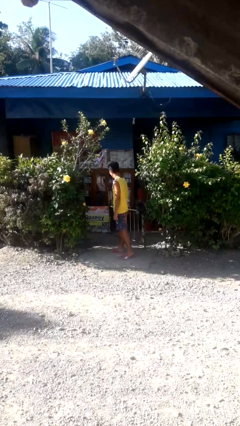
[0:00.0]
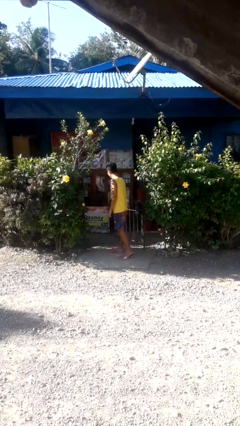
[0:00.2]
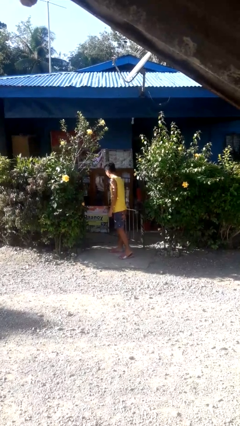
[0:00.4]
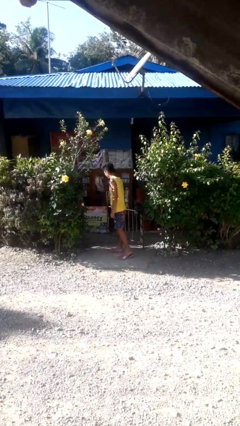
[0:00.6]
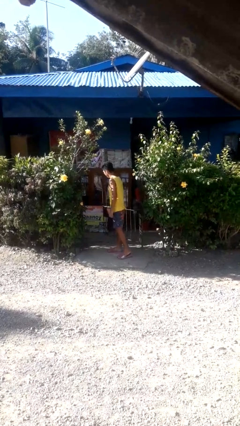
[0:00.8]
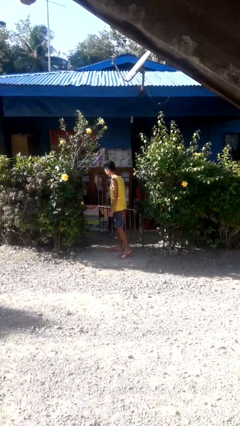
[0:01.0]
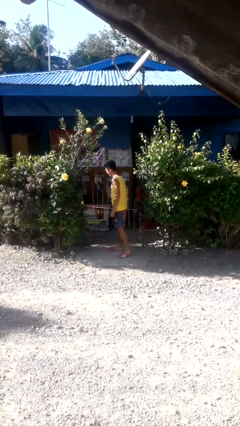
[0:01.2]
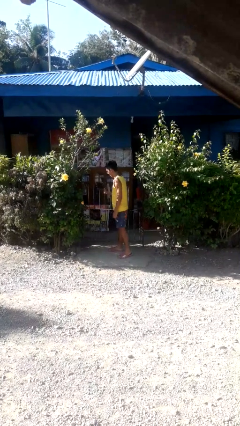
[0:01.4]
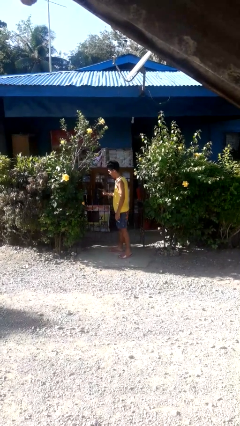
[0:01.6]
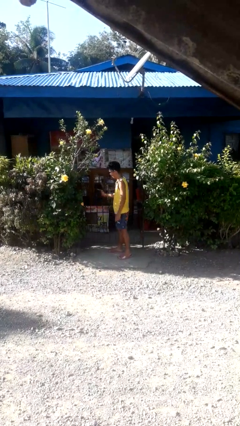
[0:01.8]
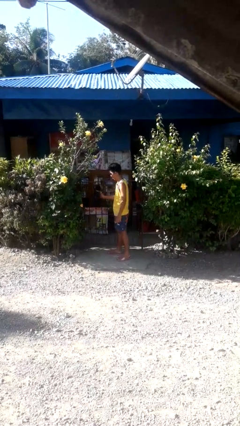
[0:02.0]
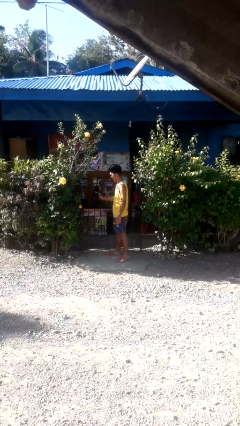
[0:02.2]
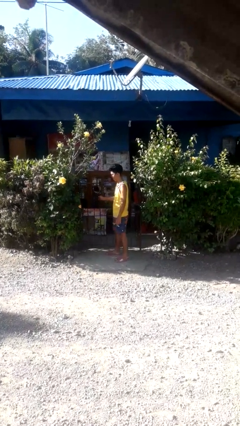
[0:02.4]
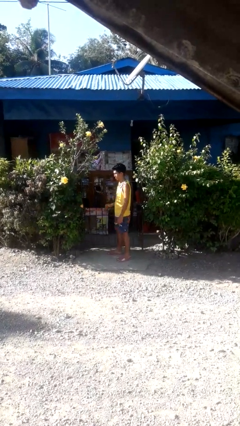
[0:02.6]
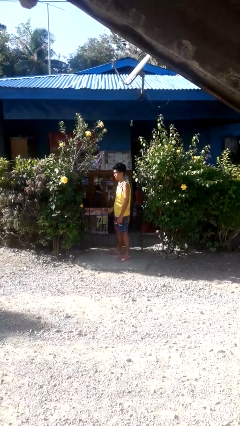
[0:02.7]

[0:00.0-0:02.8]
person closes gate

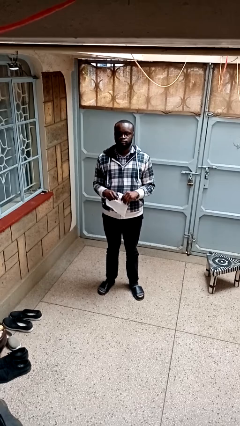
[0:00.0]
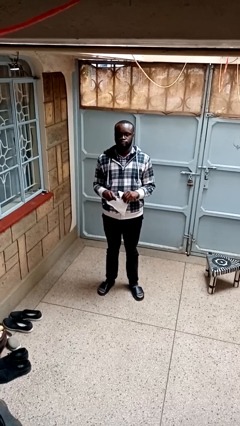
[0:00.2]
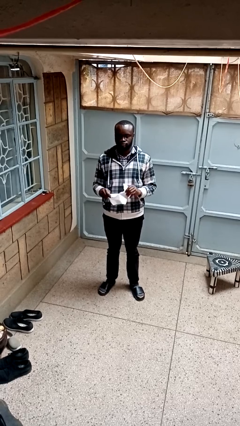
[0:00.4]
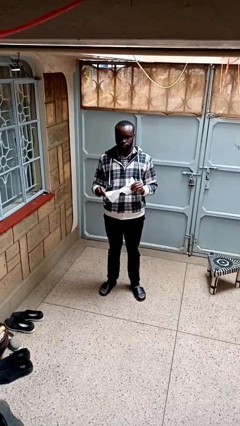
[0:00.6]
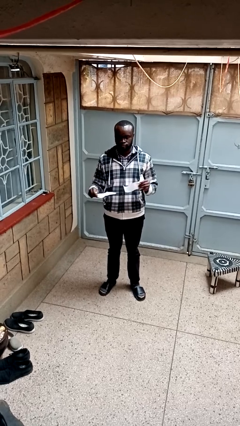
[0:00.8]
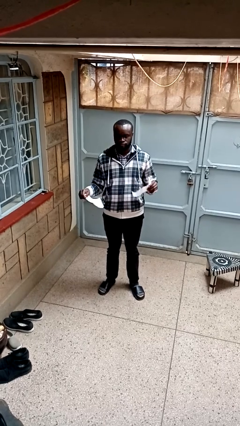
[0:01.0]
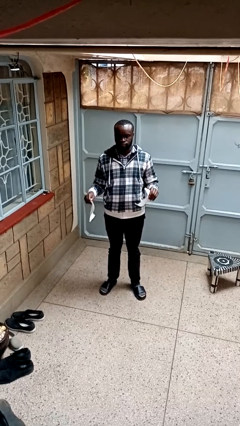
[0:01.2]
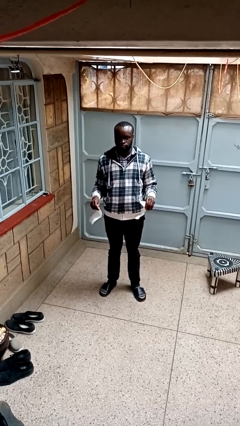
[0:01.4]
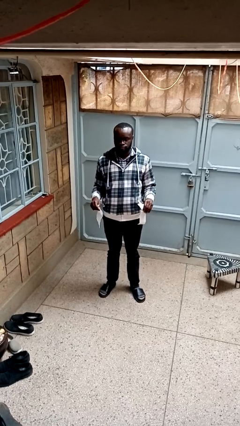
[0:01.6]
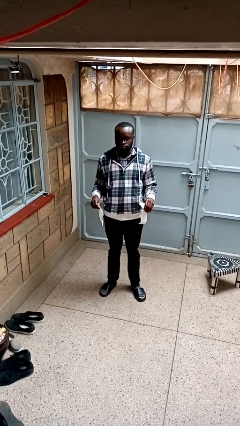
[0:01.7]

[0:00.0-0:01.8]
person tears paper

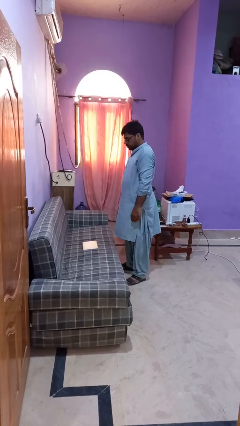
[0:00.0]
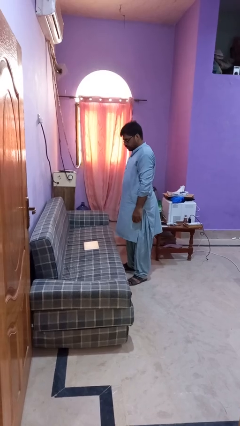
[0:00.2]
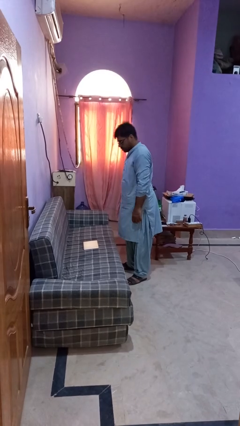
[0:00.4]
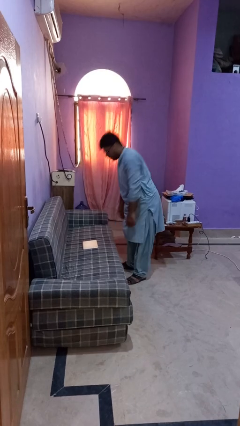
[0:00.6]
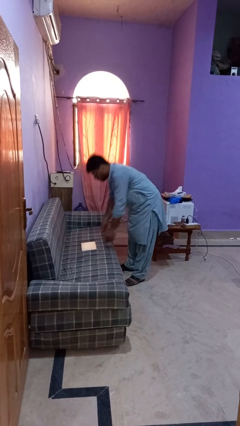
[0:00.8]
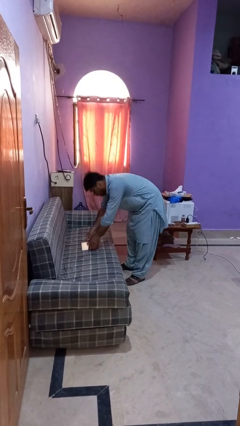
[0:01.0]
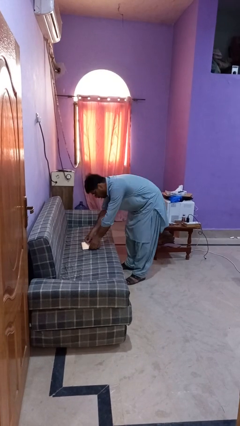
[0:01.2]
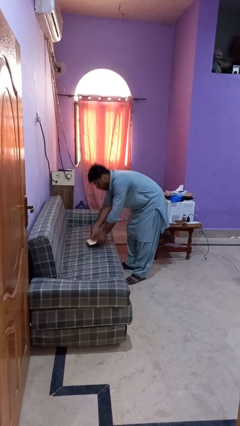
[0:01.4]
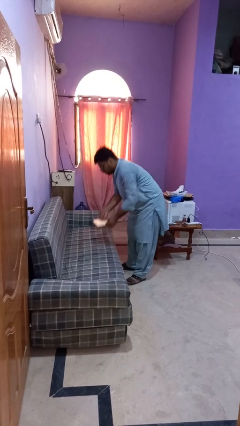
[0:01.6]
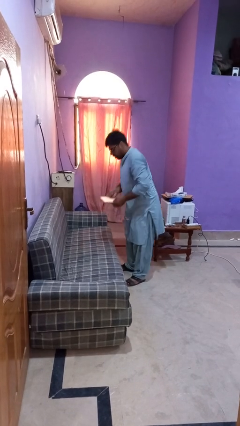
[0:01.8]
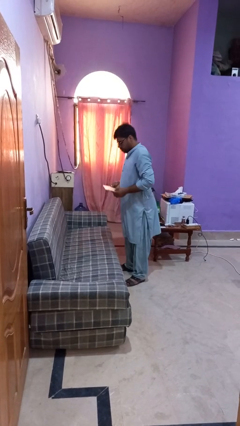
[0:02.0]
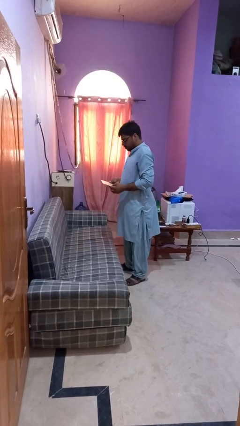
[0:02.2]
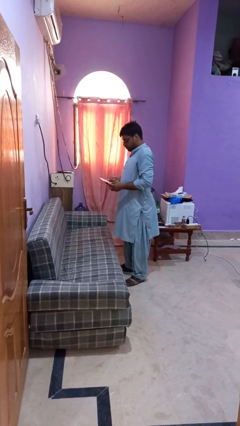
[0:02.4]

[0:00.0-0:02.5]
person picks up object from couch

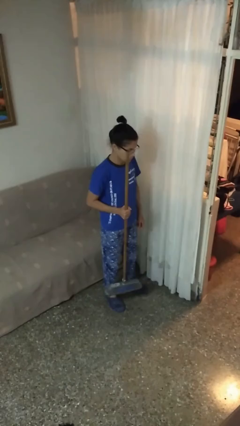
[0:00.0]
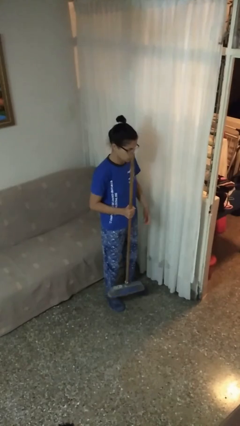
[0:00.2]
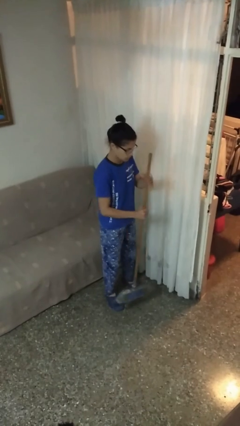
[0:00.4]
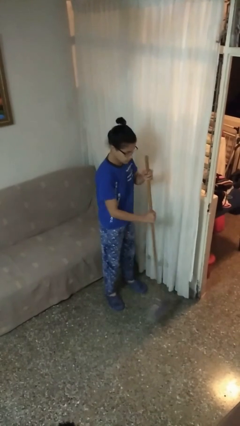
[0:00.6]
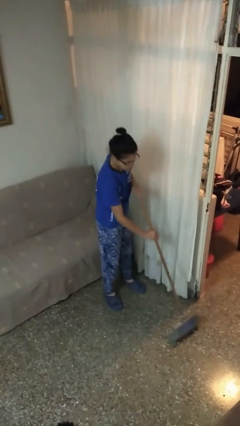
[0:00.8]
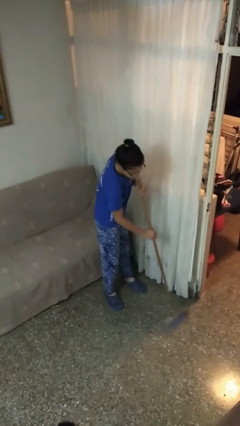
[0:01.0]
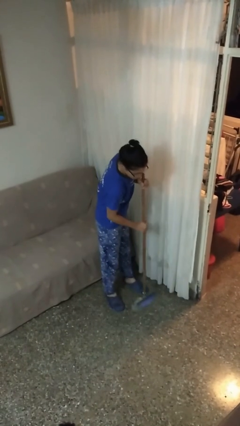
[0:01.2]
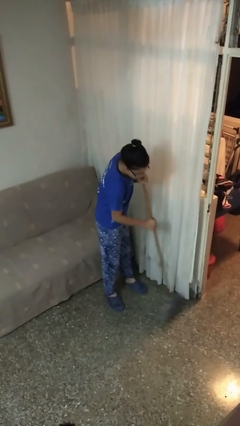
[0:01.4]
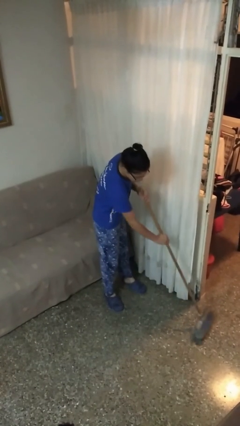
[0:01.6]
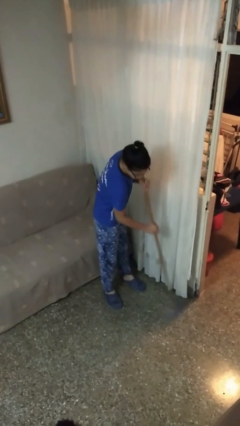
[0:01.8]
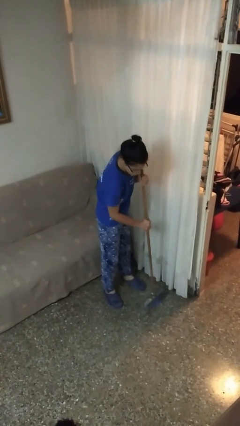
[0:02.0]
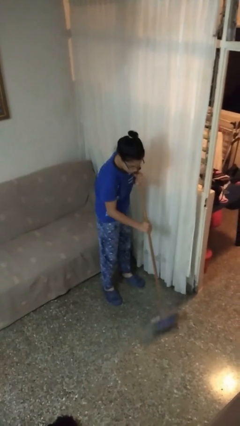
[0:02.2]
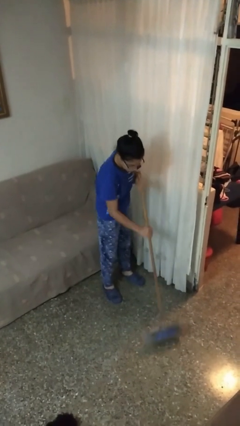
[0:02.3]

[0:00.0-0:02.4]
person sweeps floor

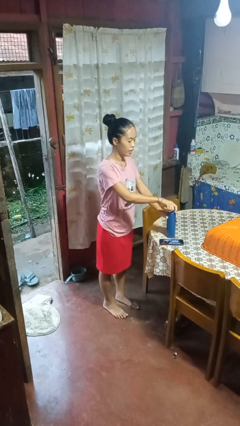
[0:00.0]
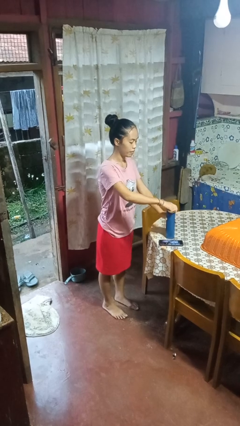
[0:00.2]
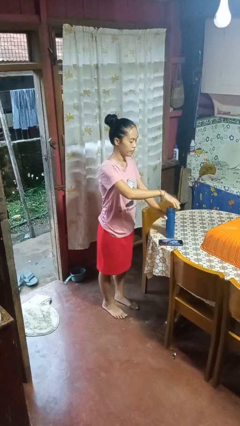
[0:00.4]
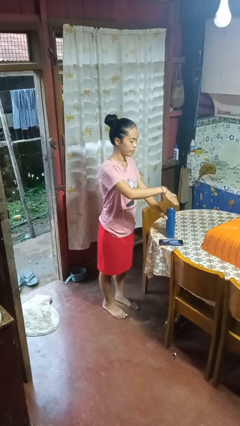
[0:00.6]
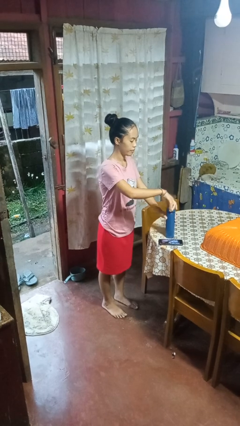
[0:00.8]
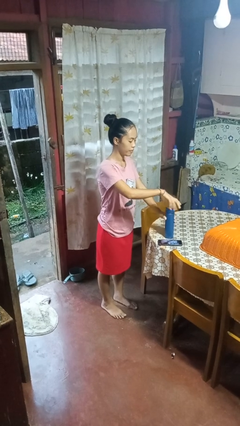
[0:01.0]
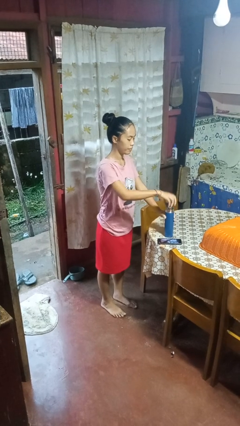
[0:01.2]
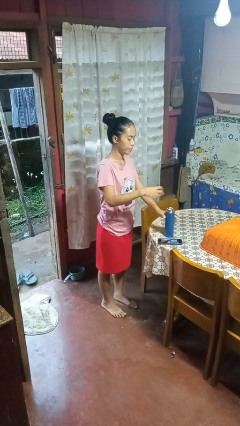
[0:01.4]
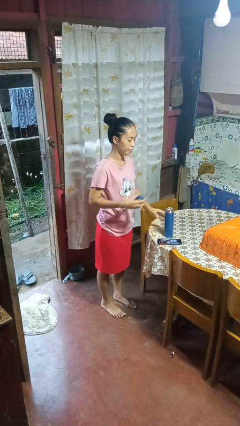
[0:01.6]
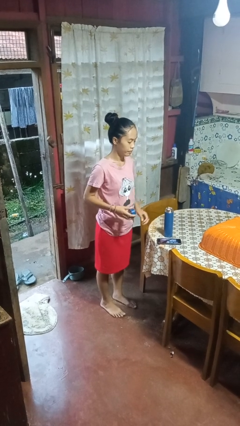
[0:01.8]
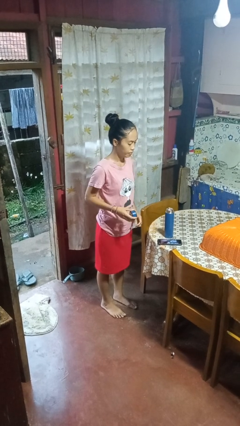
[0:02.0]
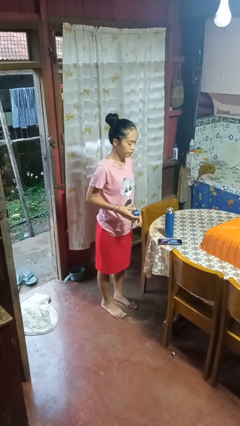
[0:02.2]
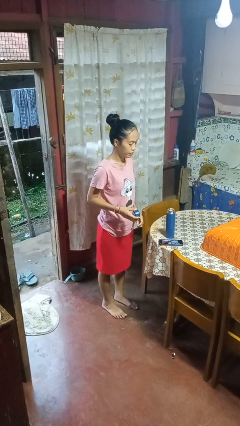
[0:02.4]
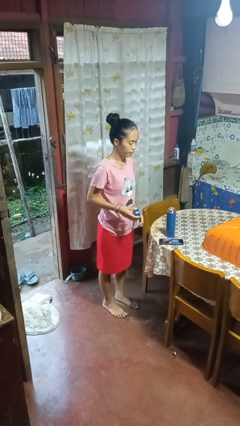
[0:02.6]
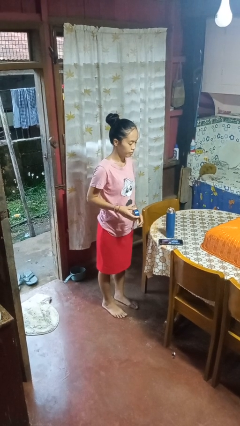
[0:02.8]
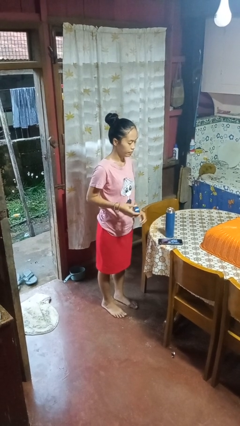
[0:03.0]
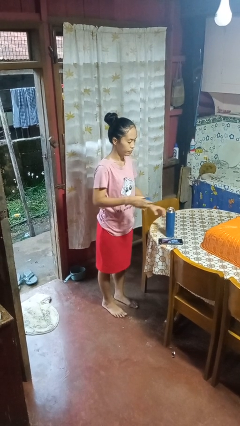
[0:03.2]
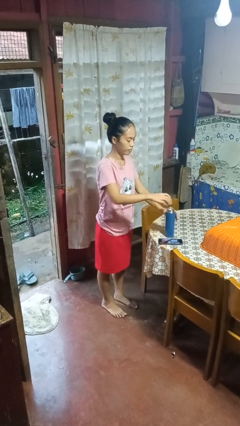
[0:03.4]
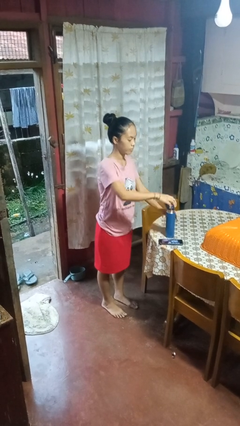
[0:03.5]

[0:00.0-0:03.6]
person opens jar

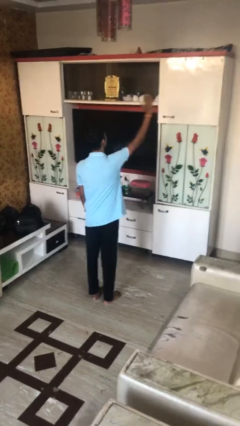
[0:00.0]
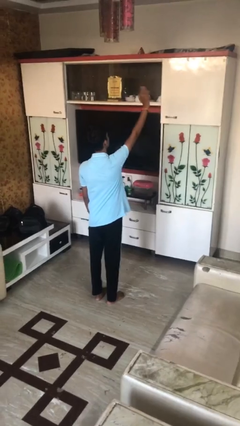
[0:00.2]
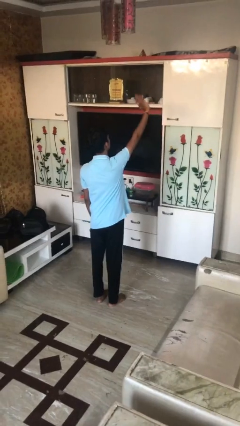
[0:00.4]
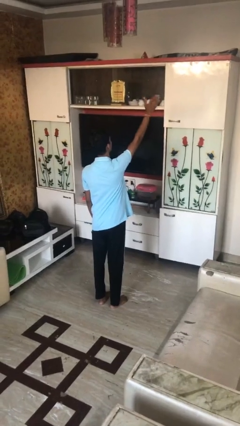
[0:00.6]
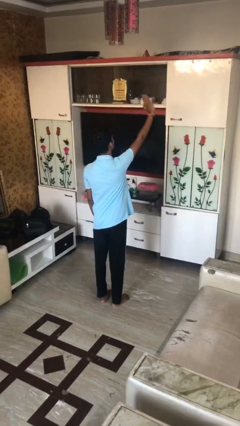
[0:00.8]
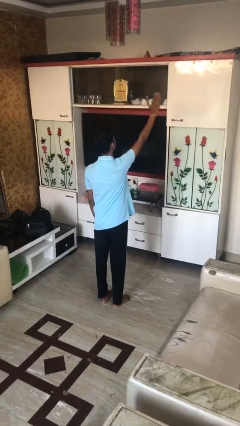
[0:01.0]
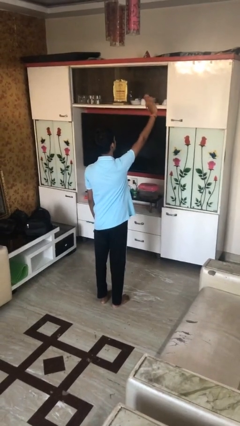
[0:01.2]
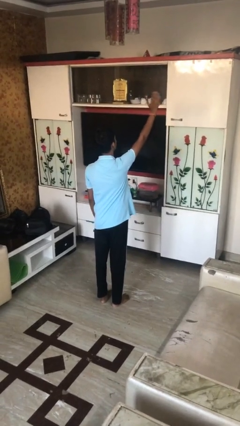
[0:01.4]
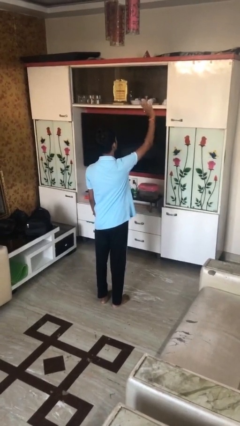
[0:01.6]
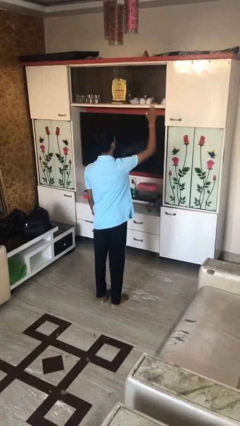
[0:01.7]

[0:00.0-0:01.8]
person waves at person

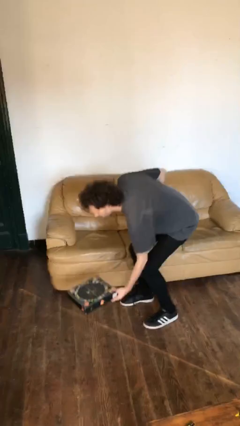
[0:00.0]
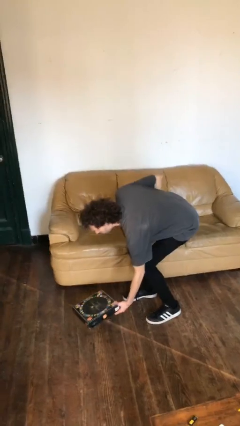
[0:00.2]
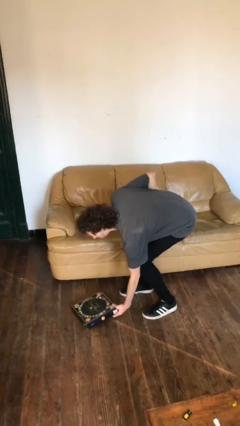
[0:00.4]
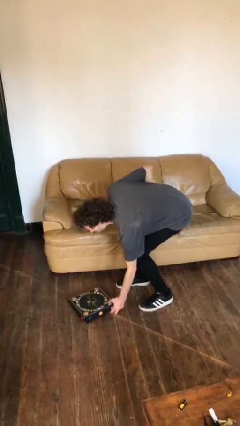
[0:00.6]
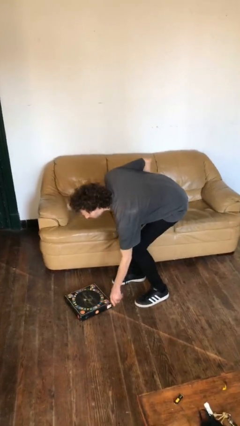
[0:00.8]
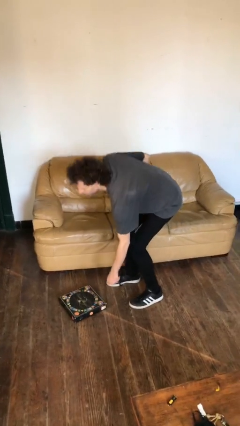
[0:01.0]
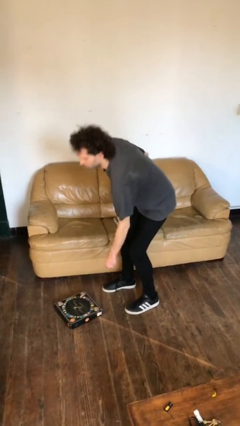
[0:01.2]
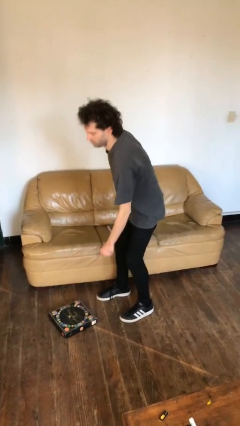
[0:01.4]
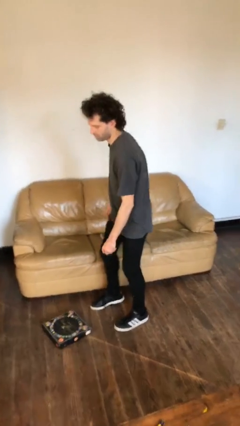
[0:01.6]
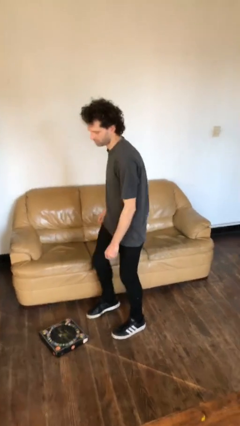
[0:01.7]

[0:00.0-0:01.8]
person puts down object on floor
